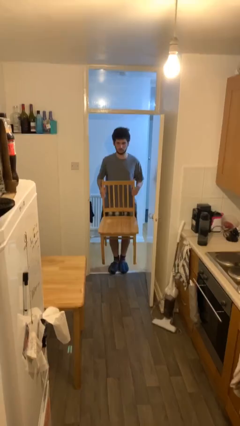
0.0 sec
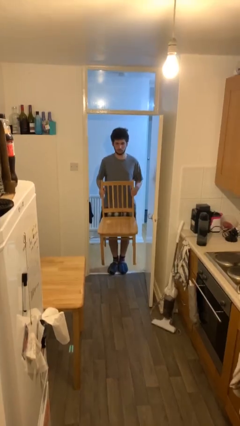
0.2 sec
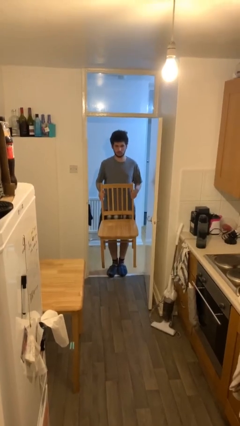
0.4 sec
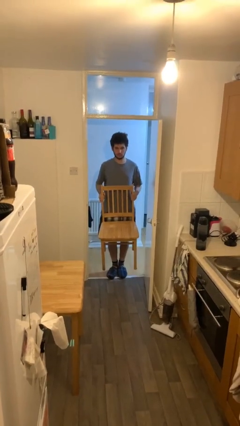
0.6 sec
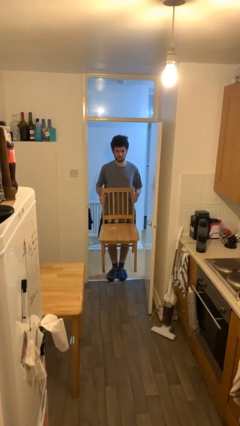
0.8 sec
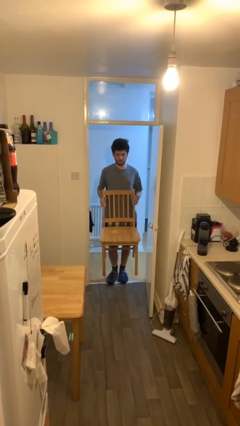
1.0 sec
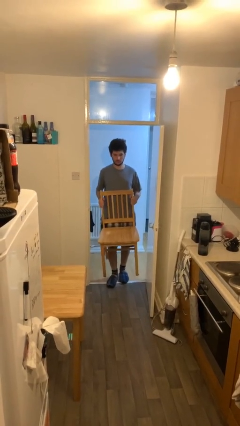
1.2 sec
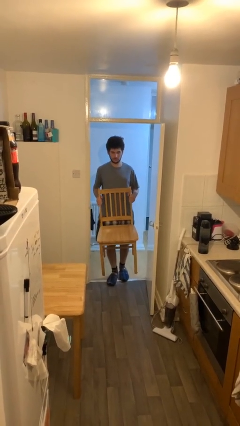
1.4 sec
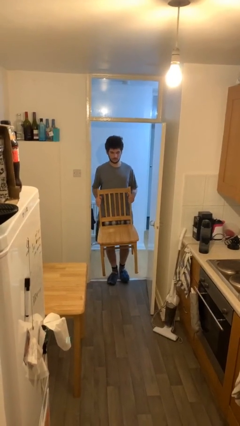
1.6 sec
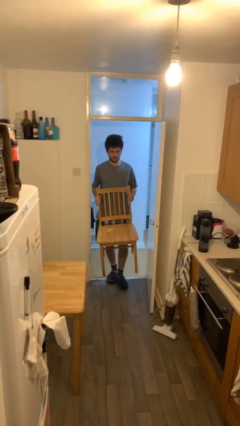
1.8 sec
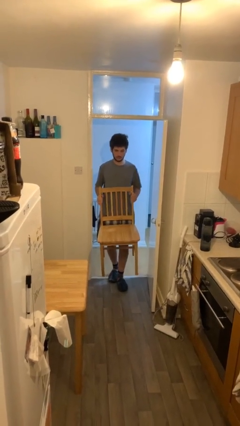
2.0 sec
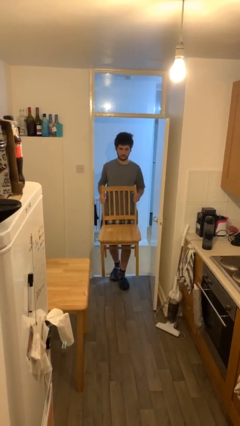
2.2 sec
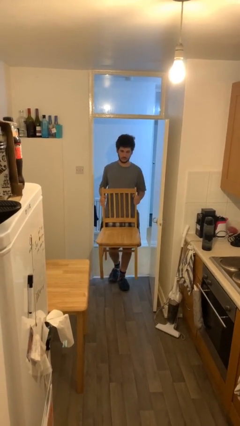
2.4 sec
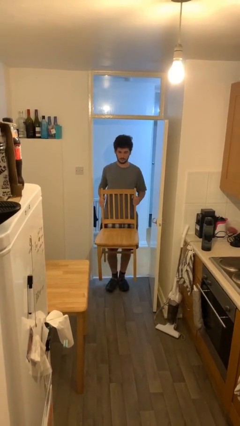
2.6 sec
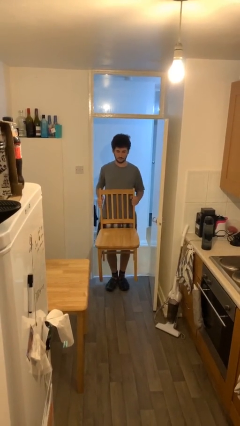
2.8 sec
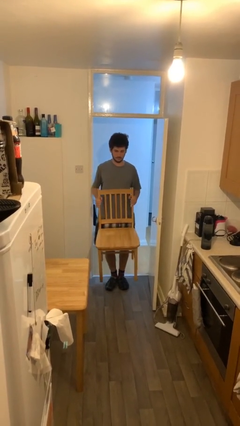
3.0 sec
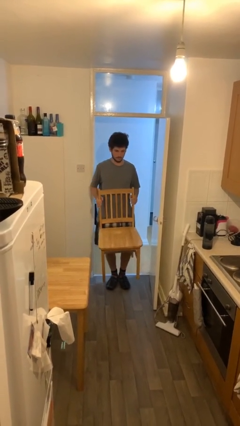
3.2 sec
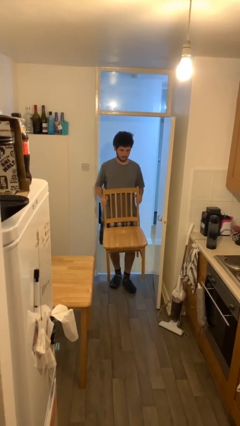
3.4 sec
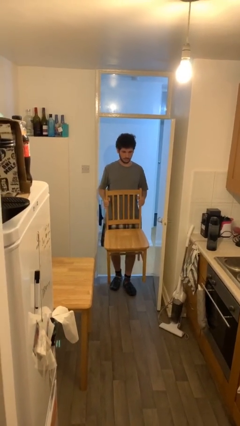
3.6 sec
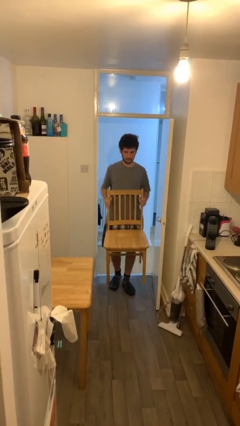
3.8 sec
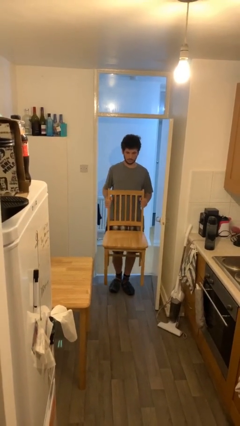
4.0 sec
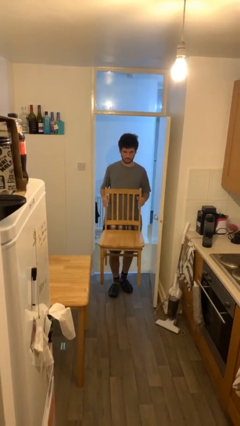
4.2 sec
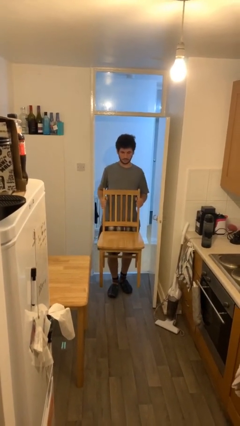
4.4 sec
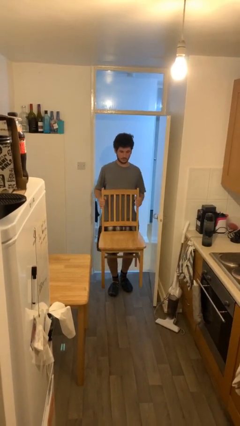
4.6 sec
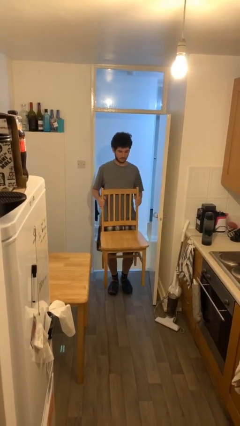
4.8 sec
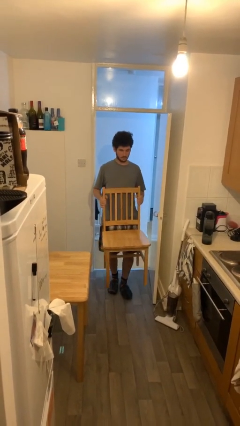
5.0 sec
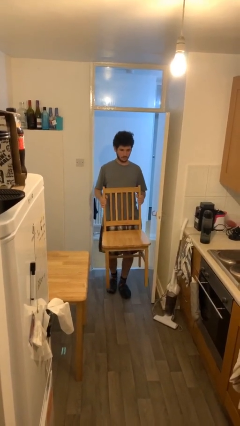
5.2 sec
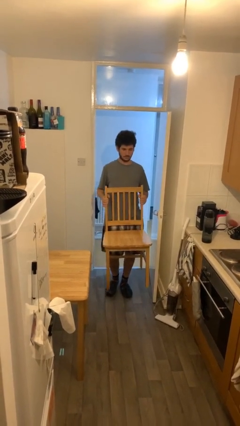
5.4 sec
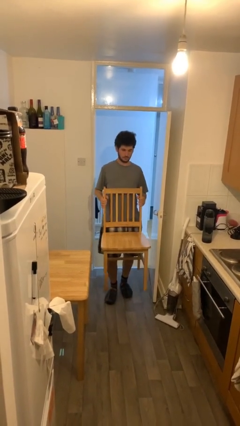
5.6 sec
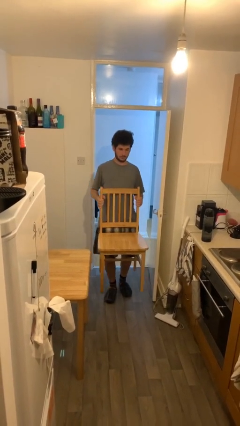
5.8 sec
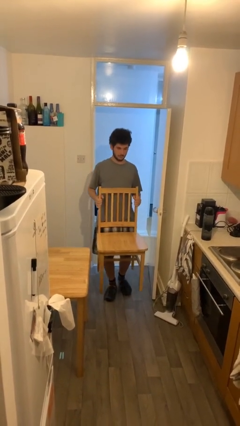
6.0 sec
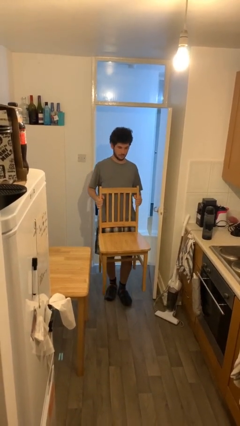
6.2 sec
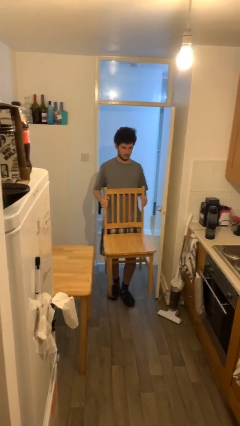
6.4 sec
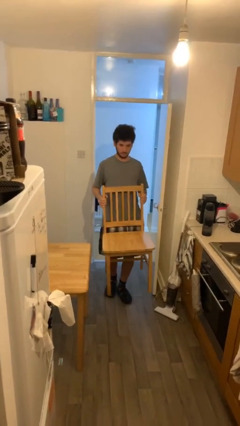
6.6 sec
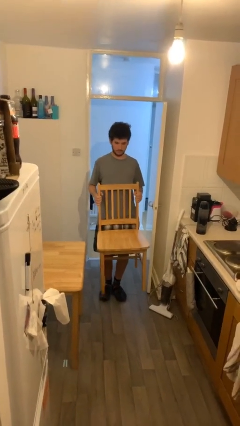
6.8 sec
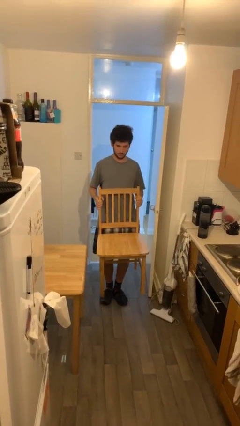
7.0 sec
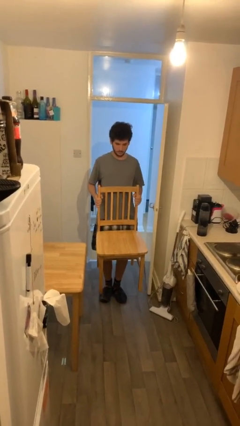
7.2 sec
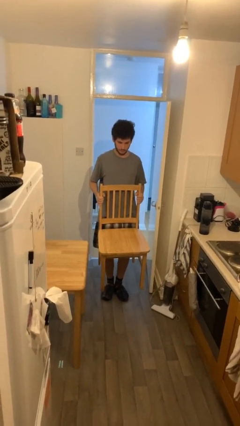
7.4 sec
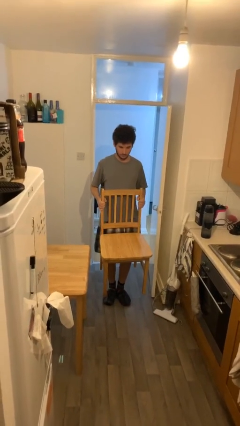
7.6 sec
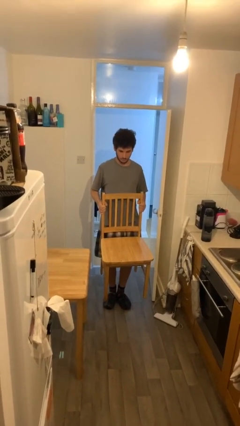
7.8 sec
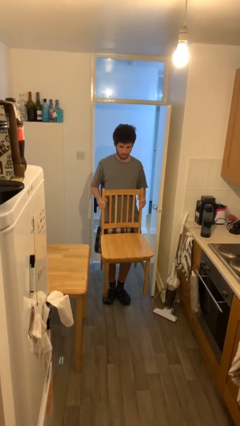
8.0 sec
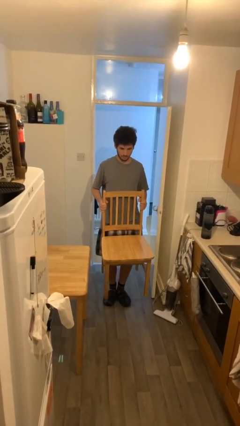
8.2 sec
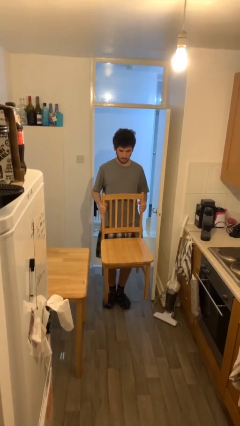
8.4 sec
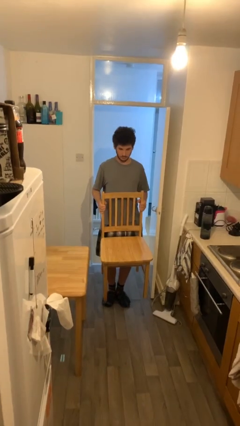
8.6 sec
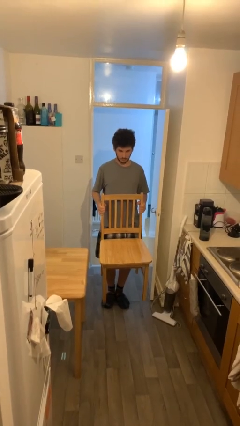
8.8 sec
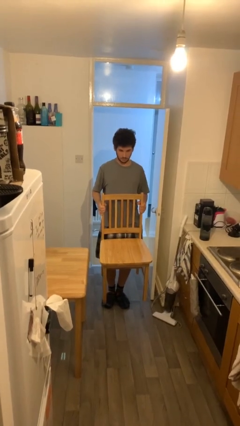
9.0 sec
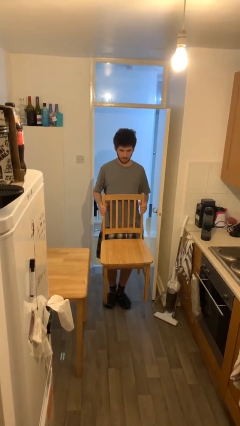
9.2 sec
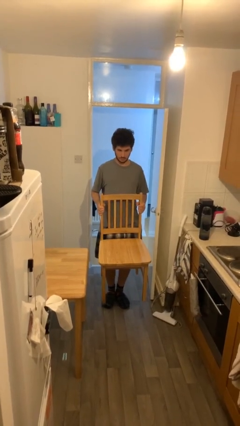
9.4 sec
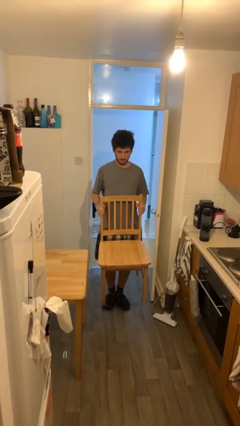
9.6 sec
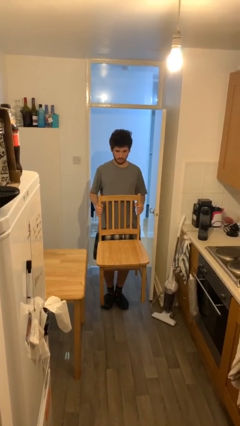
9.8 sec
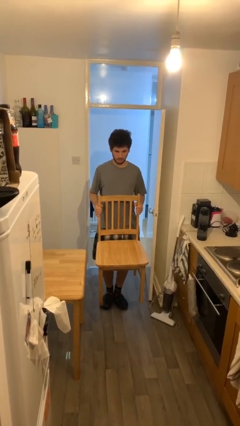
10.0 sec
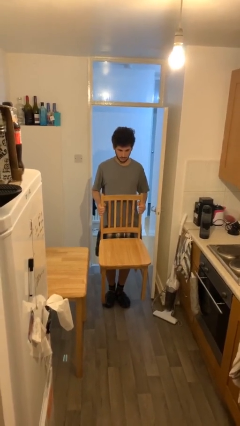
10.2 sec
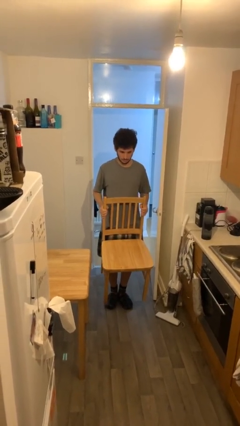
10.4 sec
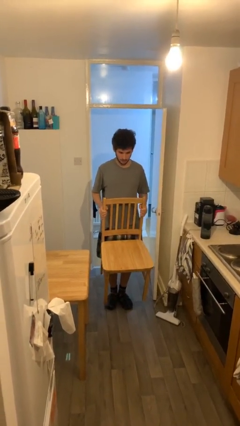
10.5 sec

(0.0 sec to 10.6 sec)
person carries heavy object

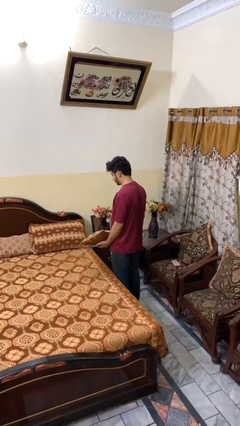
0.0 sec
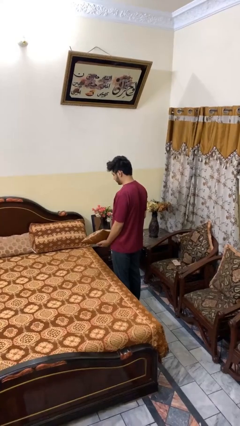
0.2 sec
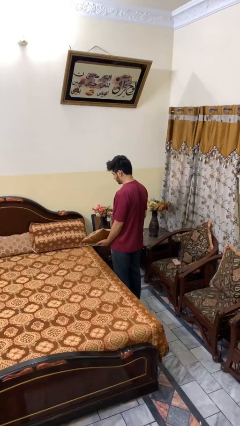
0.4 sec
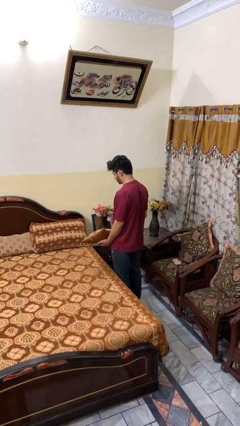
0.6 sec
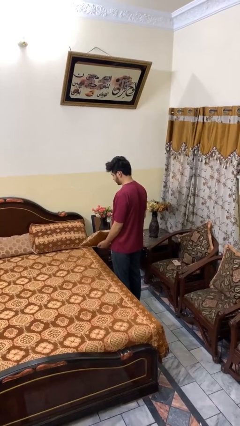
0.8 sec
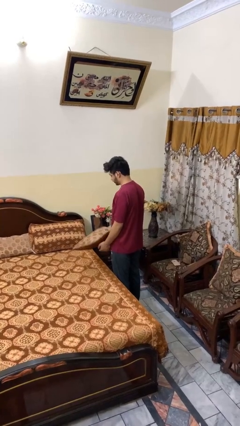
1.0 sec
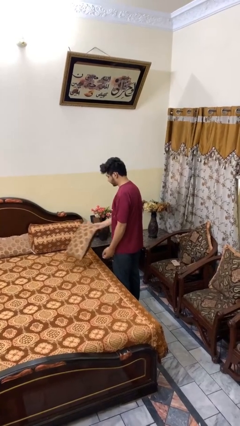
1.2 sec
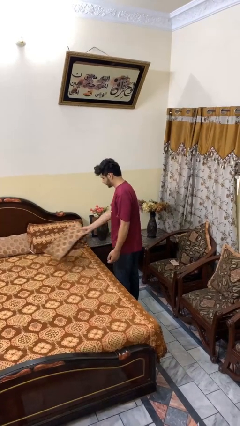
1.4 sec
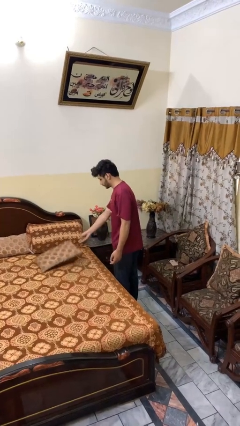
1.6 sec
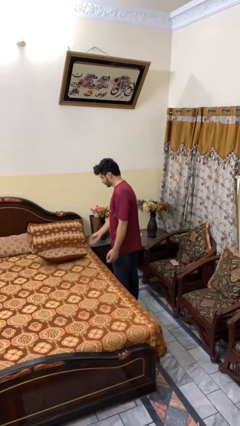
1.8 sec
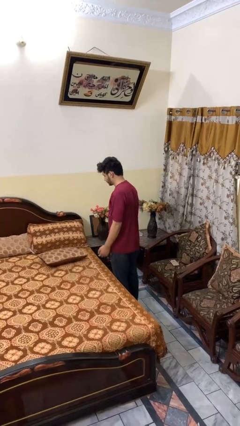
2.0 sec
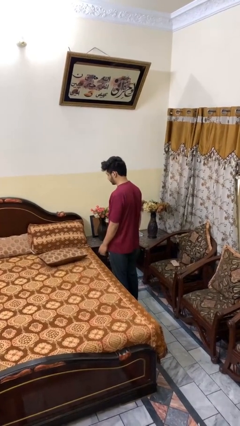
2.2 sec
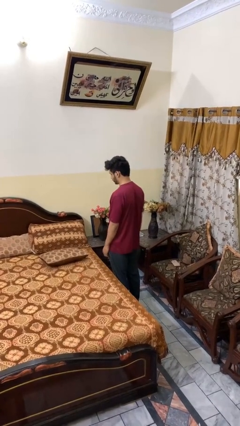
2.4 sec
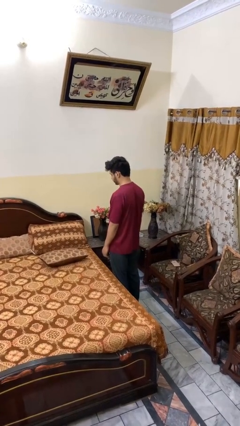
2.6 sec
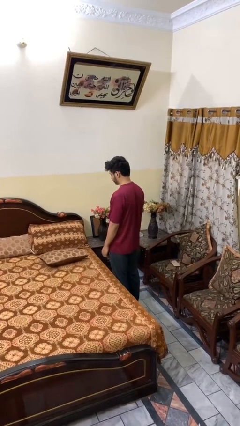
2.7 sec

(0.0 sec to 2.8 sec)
person puts down object on bed

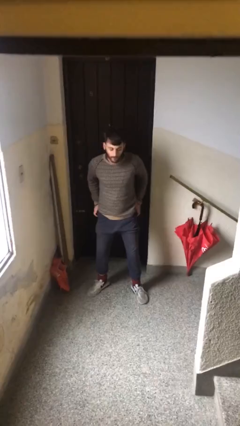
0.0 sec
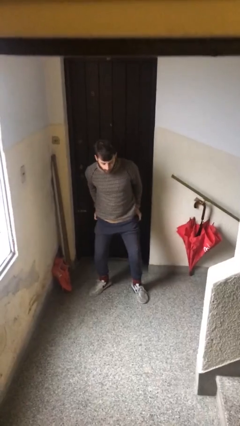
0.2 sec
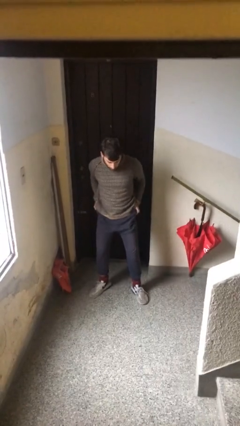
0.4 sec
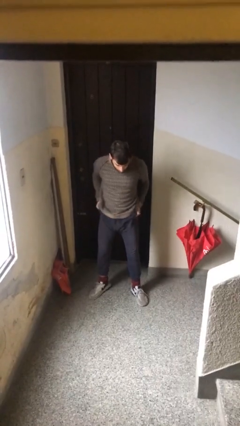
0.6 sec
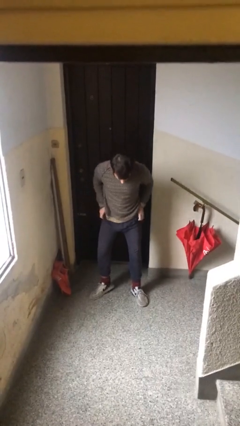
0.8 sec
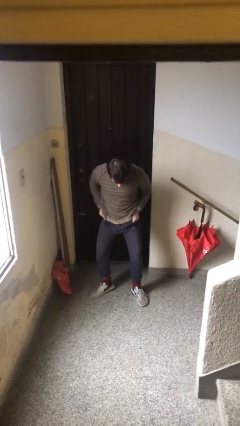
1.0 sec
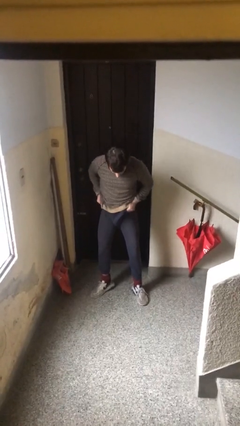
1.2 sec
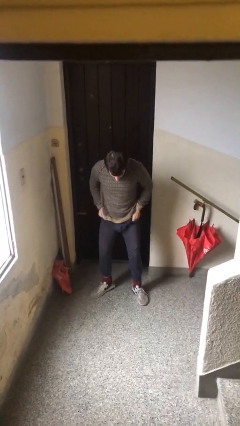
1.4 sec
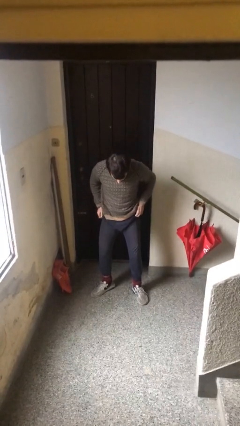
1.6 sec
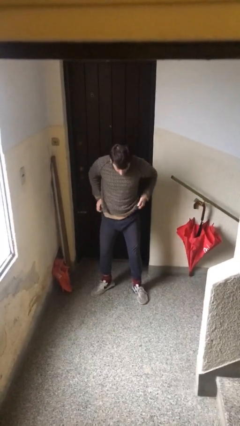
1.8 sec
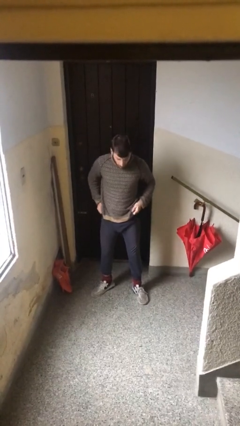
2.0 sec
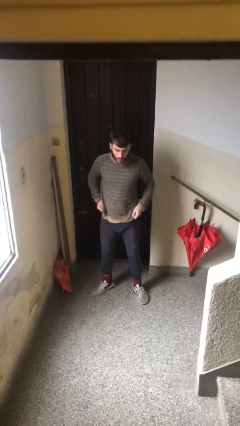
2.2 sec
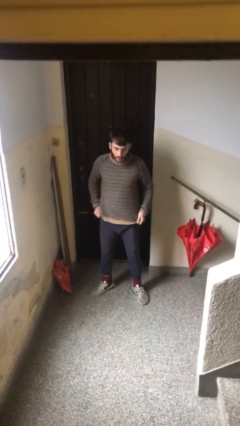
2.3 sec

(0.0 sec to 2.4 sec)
person hikes up pants

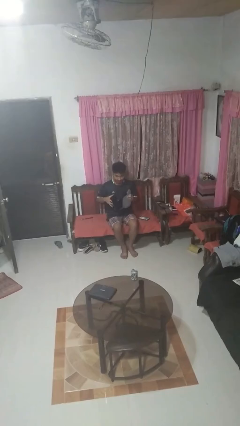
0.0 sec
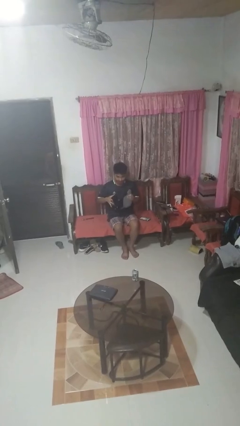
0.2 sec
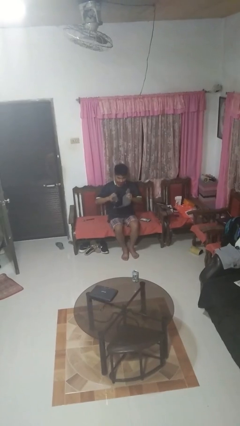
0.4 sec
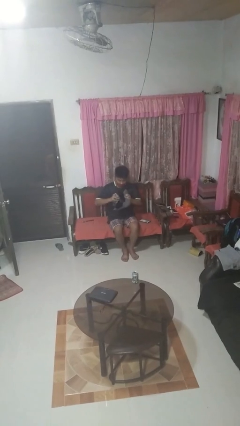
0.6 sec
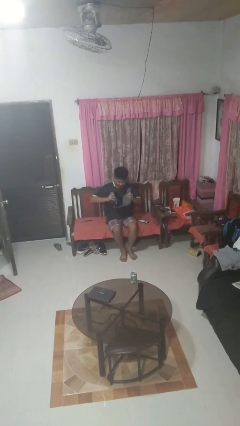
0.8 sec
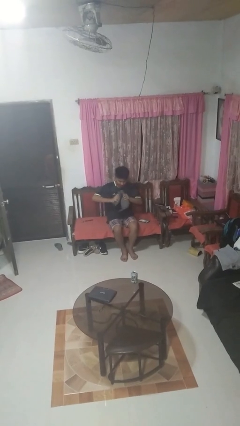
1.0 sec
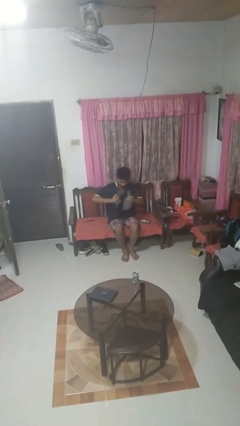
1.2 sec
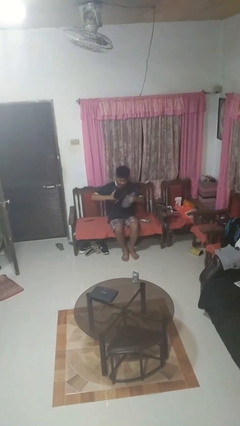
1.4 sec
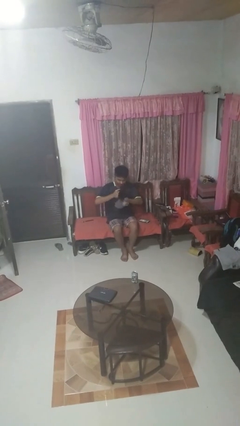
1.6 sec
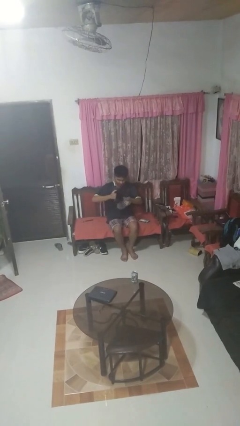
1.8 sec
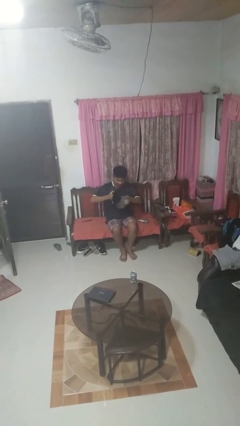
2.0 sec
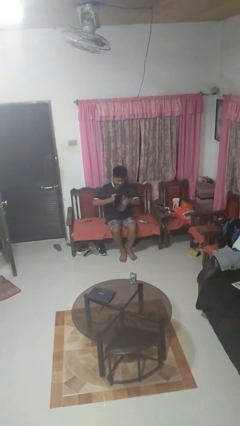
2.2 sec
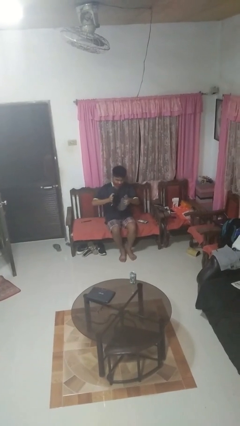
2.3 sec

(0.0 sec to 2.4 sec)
person squeezes object
